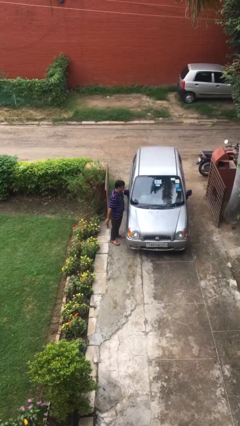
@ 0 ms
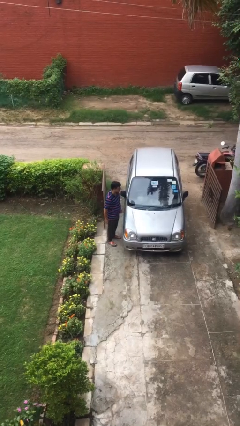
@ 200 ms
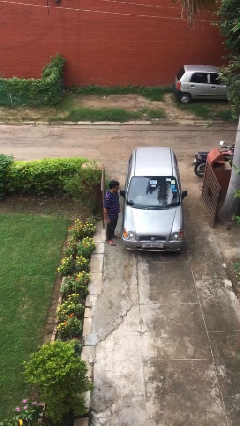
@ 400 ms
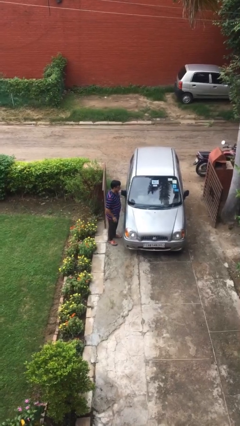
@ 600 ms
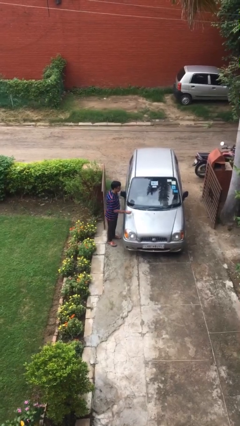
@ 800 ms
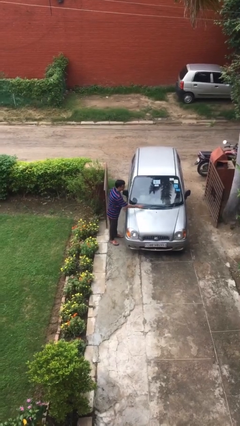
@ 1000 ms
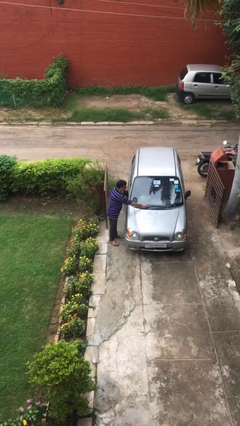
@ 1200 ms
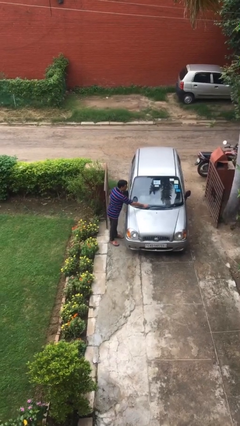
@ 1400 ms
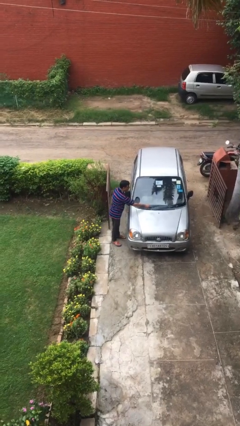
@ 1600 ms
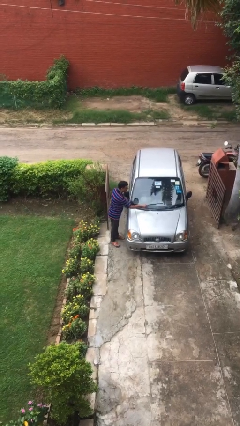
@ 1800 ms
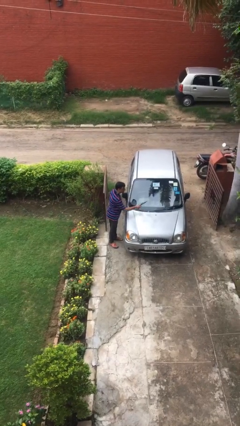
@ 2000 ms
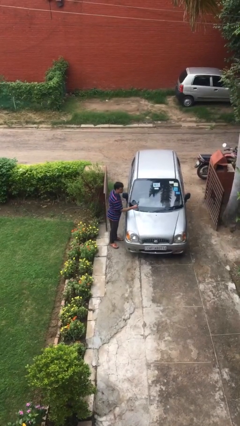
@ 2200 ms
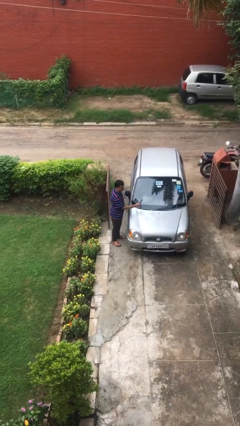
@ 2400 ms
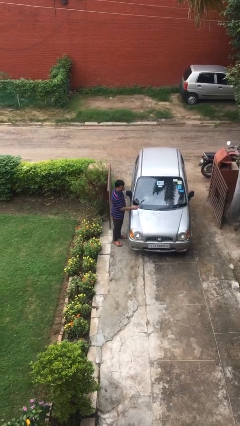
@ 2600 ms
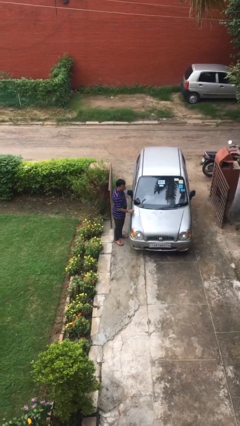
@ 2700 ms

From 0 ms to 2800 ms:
person flips up car wipers

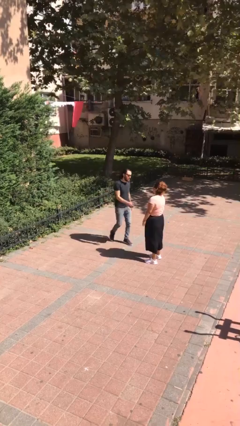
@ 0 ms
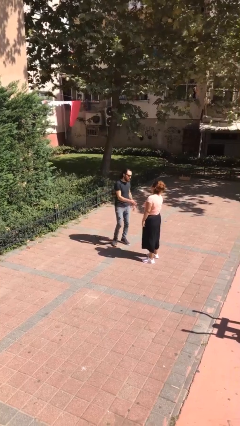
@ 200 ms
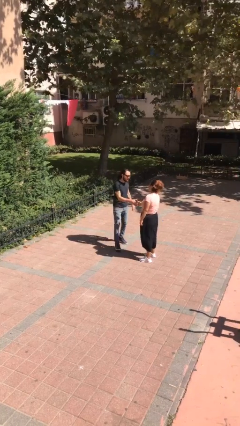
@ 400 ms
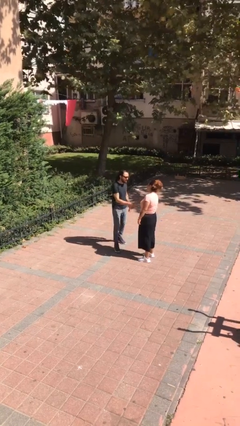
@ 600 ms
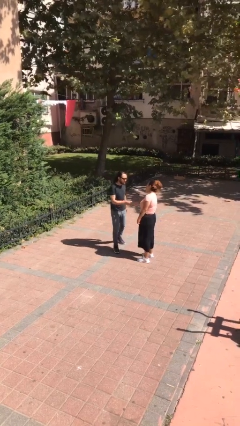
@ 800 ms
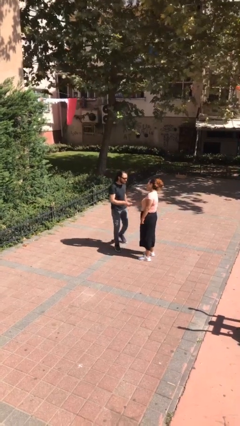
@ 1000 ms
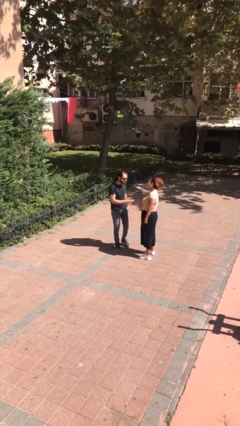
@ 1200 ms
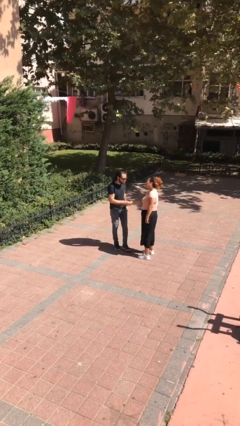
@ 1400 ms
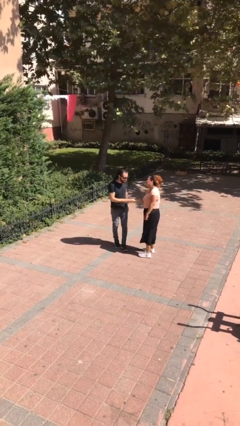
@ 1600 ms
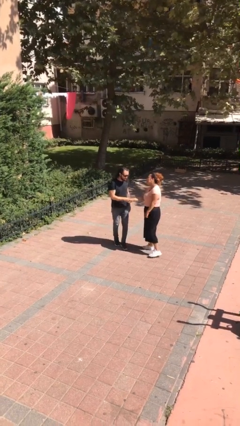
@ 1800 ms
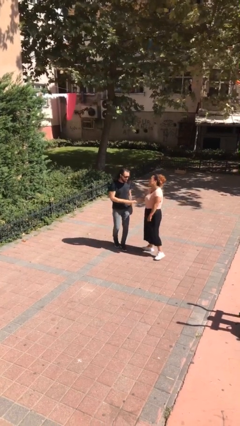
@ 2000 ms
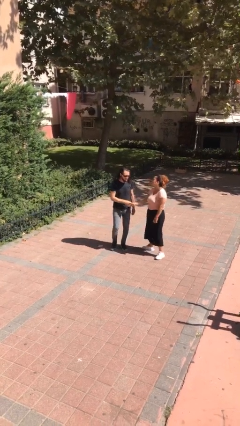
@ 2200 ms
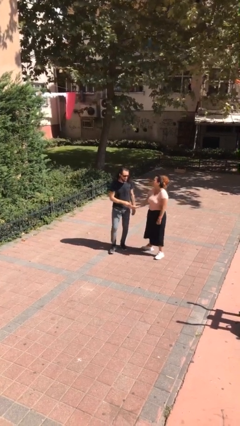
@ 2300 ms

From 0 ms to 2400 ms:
person shakes hand

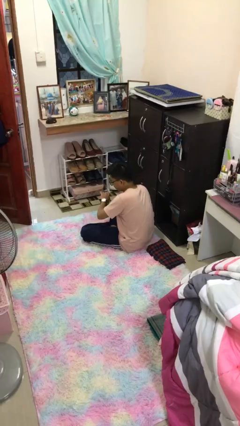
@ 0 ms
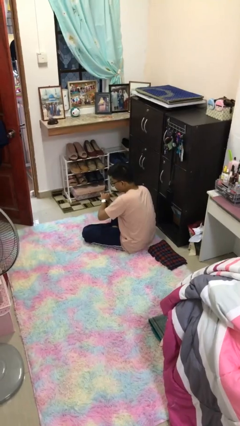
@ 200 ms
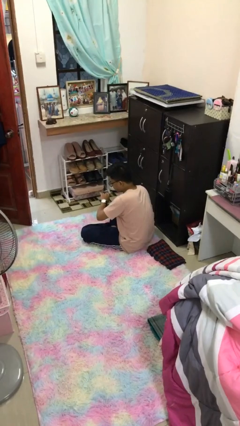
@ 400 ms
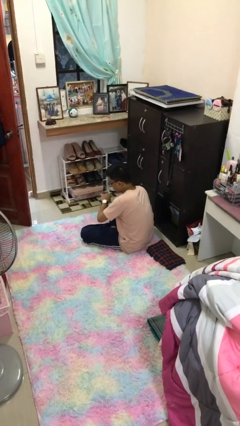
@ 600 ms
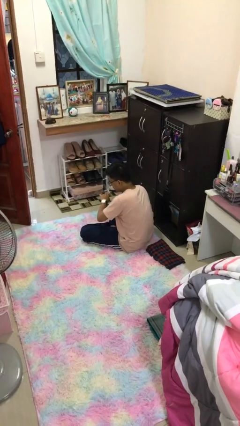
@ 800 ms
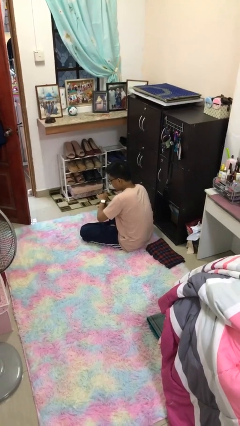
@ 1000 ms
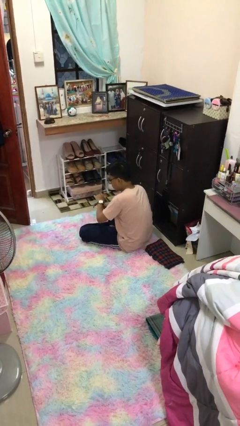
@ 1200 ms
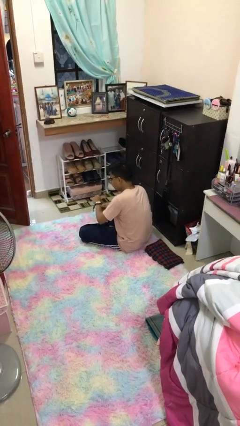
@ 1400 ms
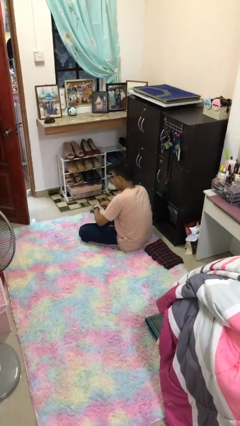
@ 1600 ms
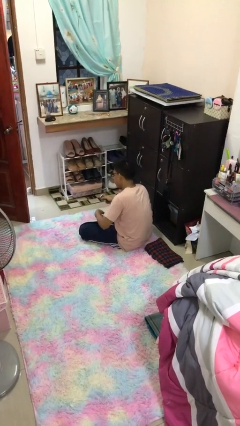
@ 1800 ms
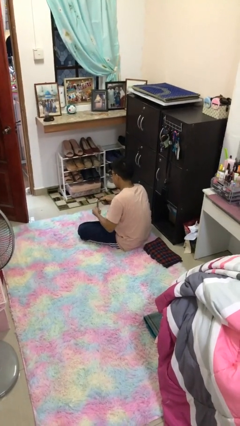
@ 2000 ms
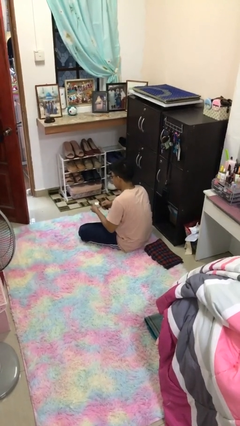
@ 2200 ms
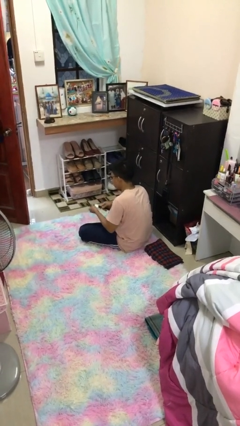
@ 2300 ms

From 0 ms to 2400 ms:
person takes off wristwatch

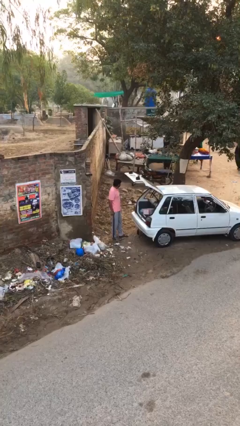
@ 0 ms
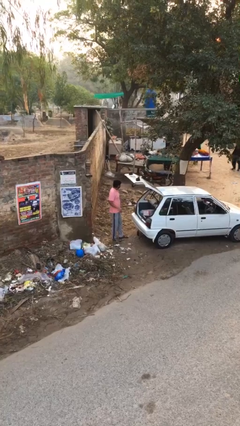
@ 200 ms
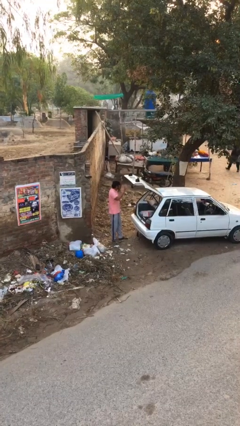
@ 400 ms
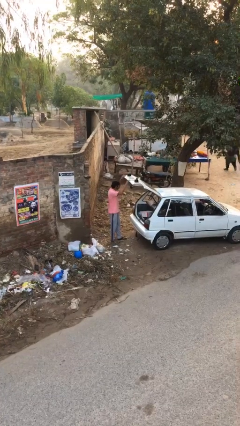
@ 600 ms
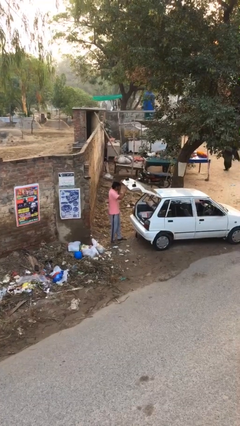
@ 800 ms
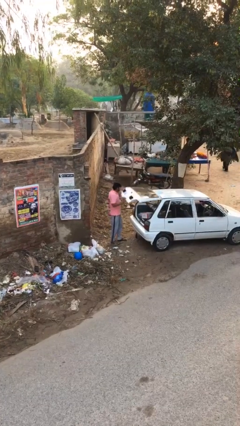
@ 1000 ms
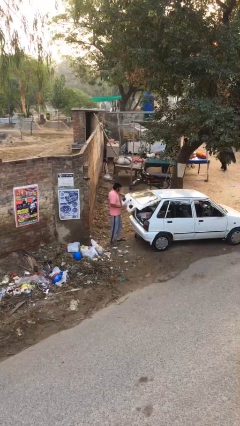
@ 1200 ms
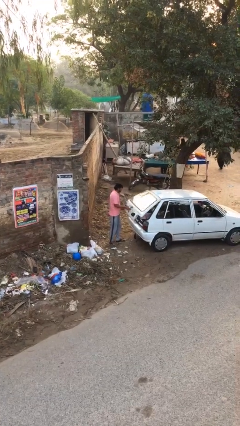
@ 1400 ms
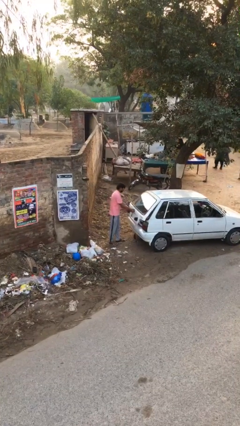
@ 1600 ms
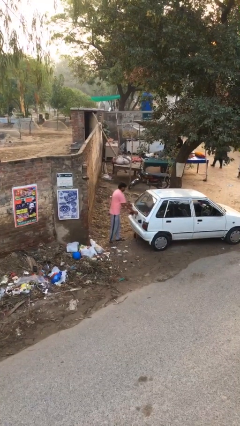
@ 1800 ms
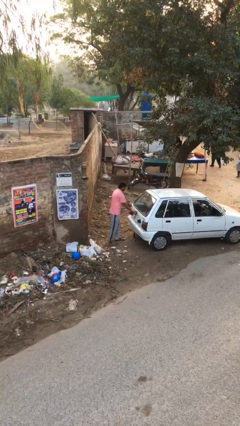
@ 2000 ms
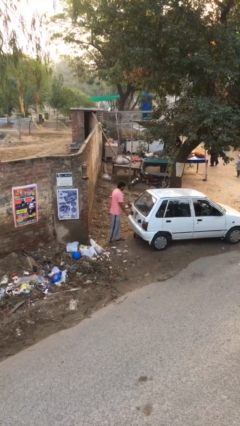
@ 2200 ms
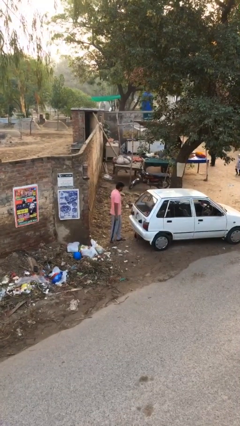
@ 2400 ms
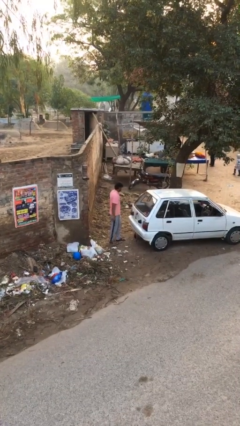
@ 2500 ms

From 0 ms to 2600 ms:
person closes car trunk

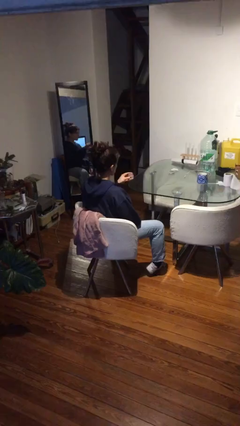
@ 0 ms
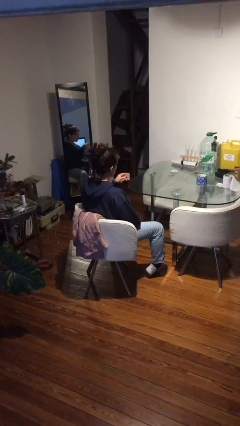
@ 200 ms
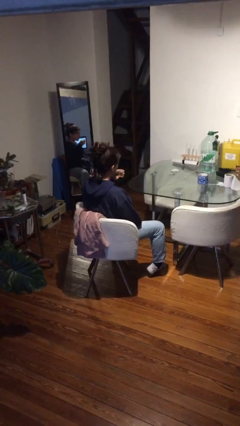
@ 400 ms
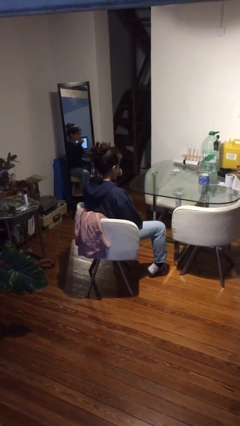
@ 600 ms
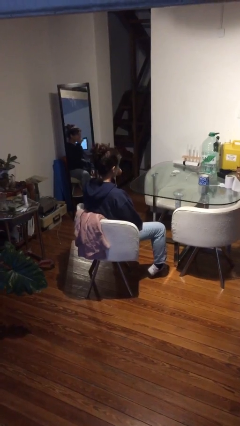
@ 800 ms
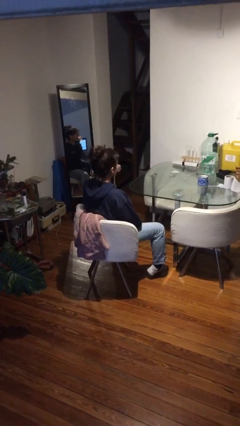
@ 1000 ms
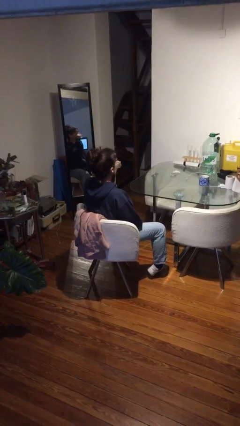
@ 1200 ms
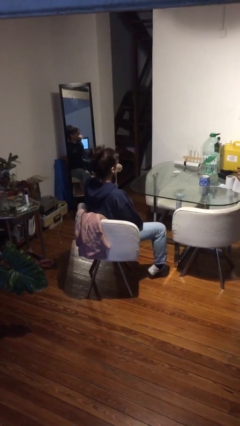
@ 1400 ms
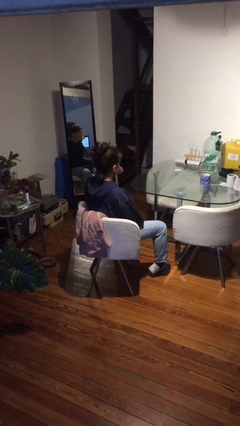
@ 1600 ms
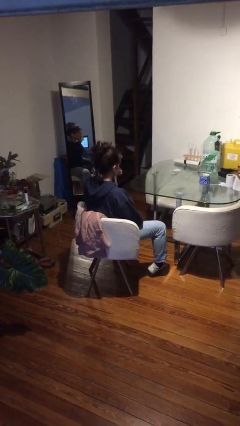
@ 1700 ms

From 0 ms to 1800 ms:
person drinks from shotglass

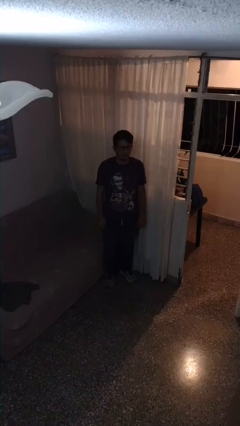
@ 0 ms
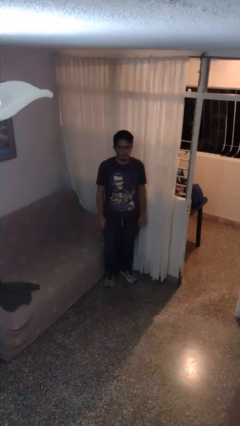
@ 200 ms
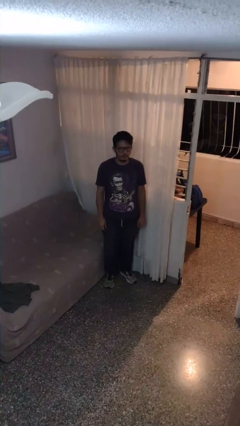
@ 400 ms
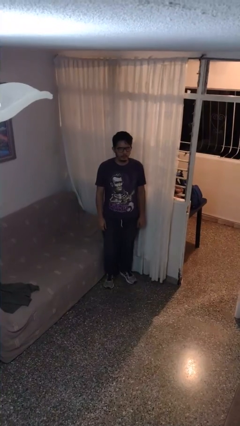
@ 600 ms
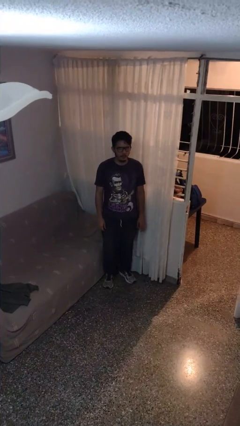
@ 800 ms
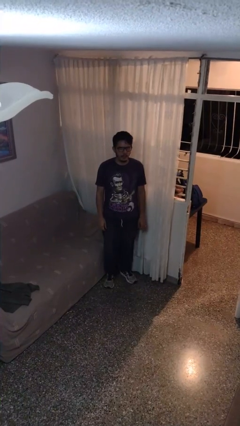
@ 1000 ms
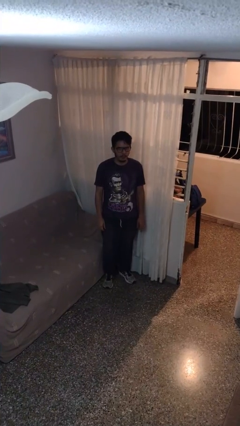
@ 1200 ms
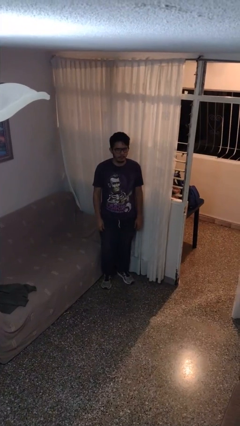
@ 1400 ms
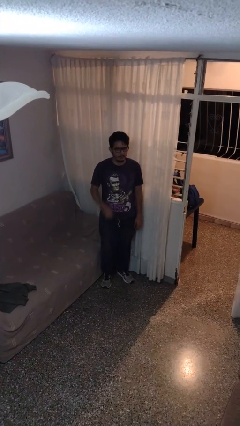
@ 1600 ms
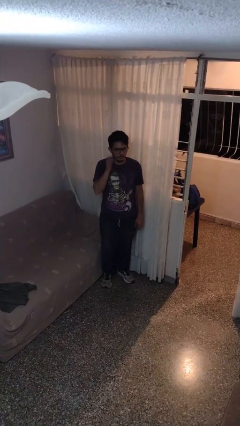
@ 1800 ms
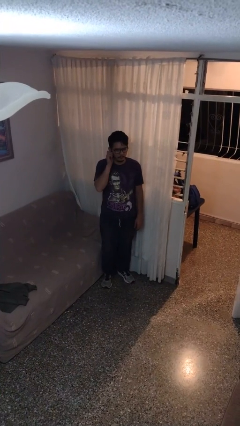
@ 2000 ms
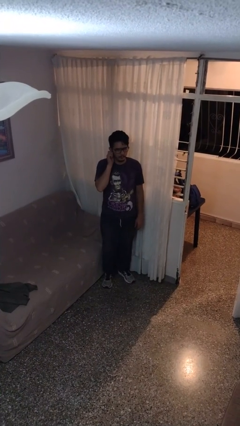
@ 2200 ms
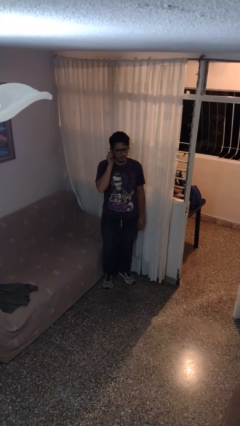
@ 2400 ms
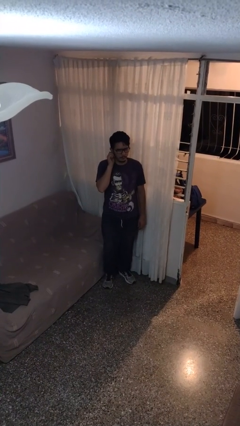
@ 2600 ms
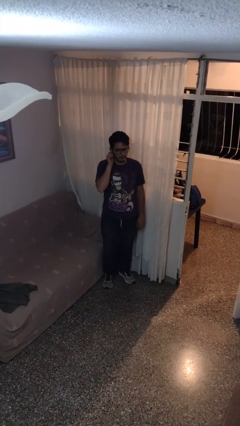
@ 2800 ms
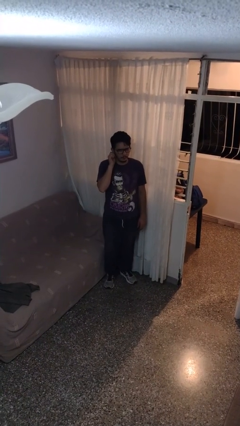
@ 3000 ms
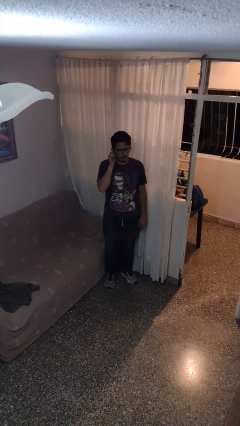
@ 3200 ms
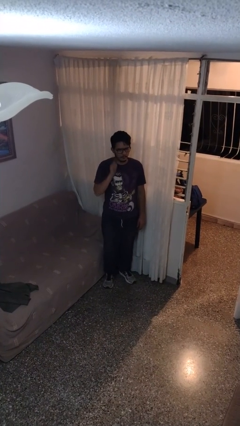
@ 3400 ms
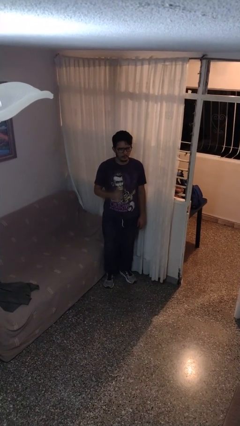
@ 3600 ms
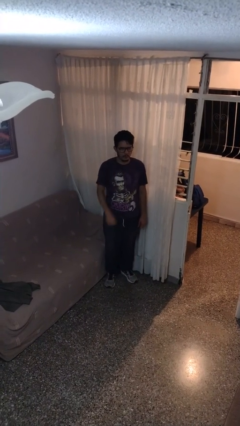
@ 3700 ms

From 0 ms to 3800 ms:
person touches earlobe

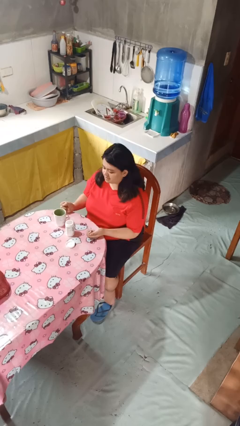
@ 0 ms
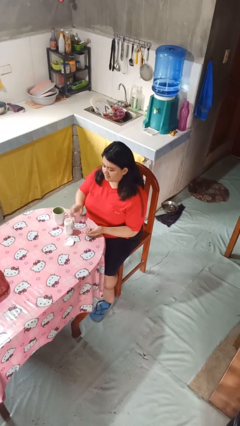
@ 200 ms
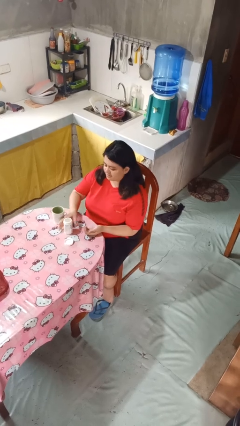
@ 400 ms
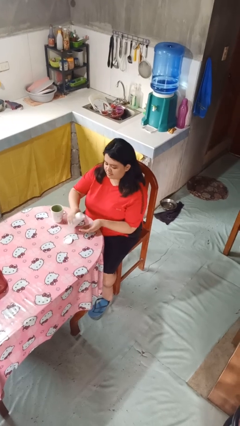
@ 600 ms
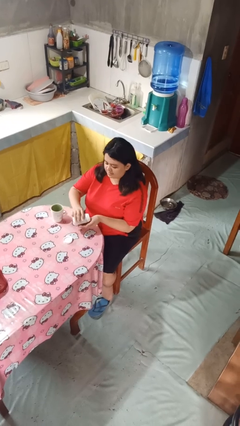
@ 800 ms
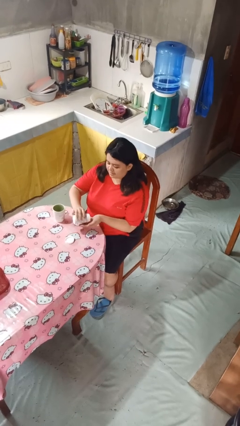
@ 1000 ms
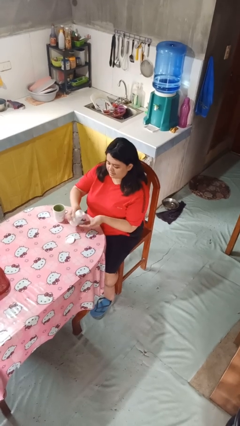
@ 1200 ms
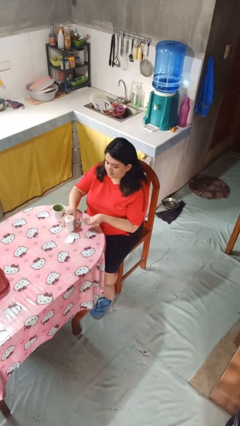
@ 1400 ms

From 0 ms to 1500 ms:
person takes medicine pills
